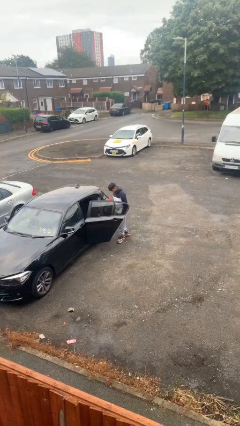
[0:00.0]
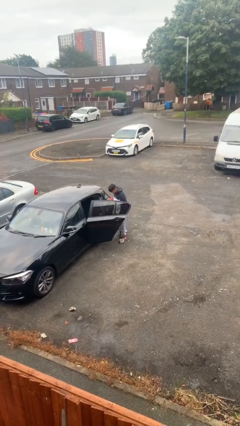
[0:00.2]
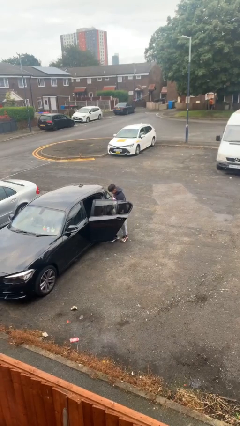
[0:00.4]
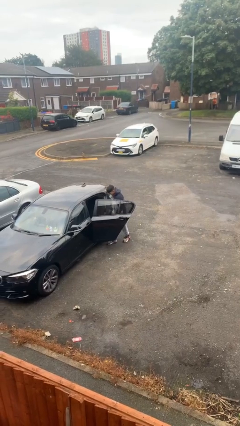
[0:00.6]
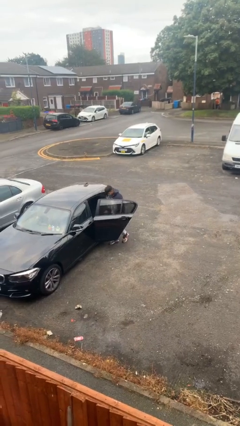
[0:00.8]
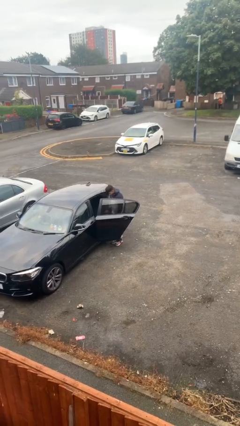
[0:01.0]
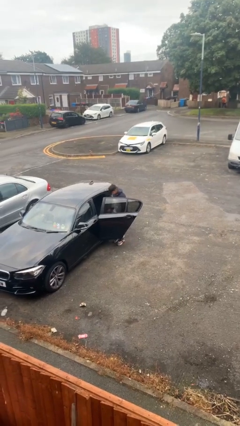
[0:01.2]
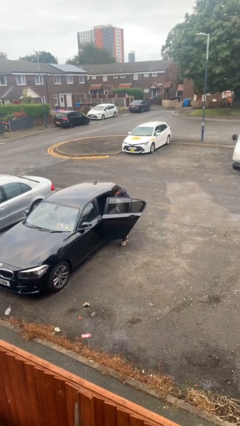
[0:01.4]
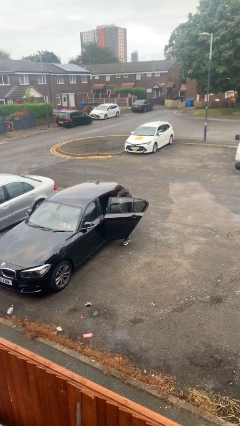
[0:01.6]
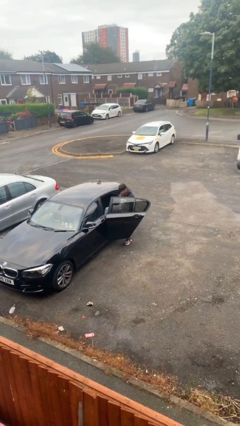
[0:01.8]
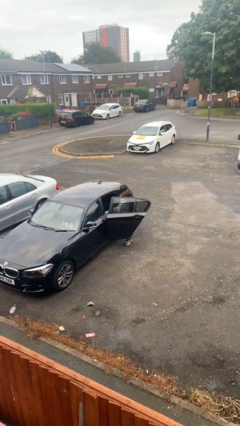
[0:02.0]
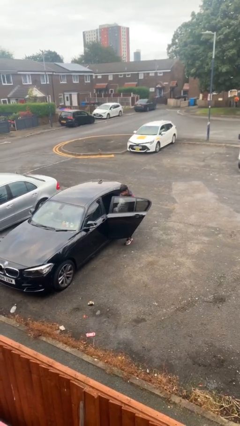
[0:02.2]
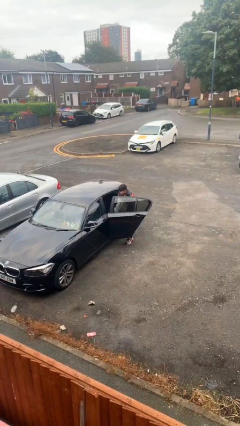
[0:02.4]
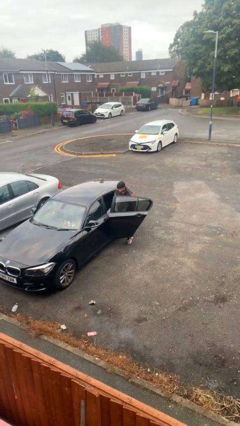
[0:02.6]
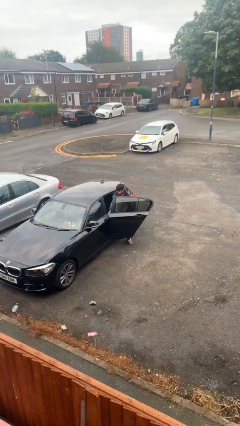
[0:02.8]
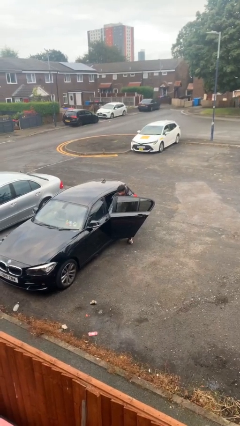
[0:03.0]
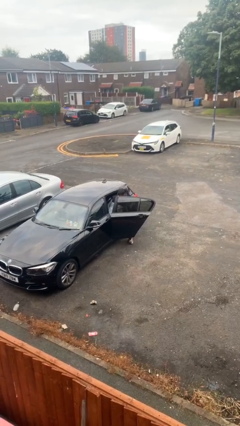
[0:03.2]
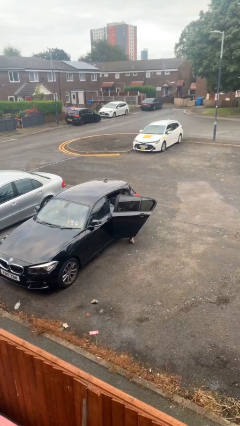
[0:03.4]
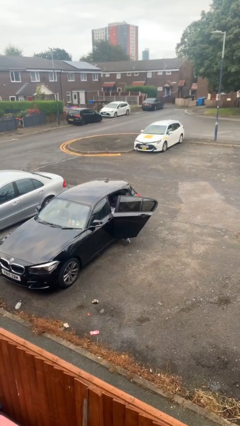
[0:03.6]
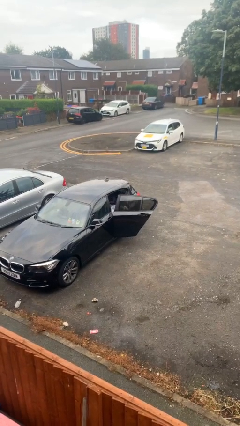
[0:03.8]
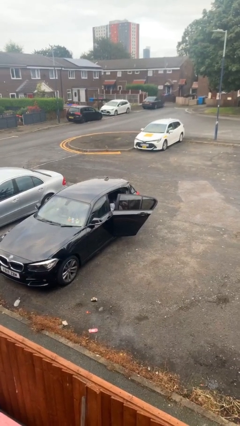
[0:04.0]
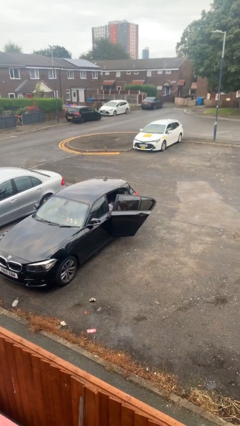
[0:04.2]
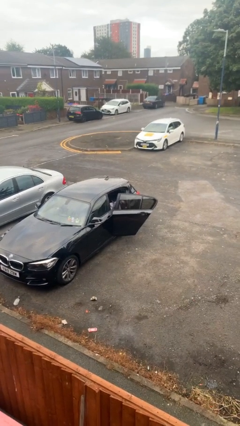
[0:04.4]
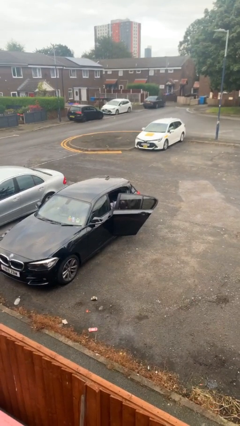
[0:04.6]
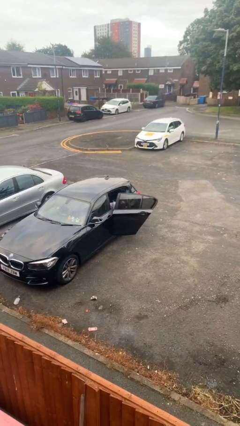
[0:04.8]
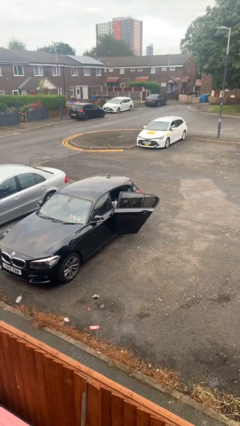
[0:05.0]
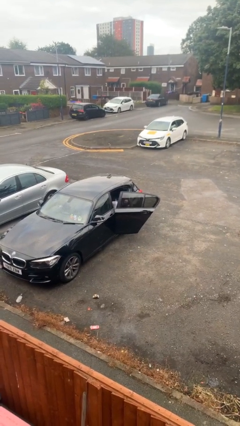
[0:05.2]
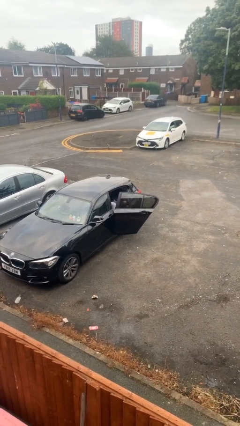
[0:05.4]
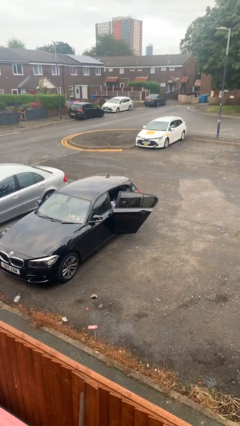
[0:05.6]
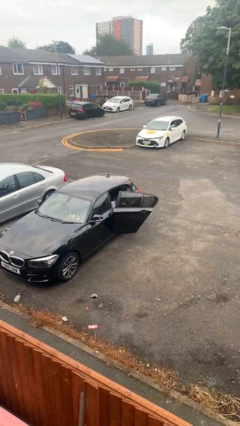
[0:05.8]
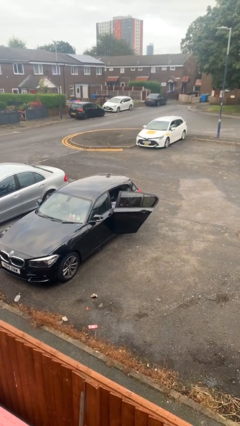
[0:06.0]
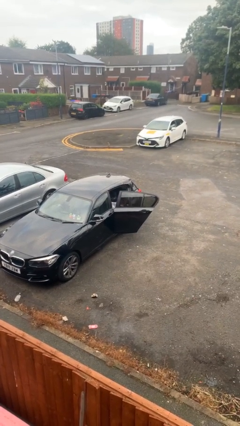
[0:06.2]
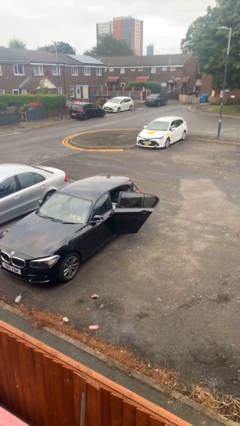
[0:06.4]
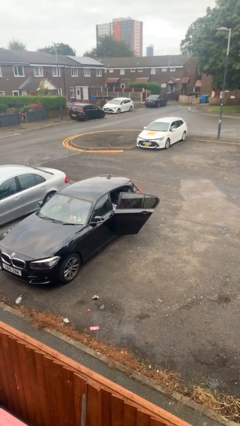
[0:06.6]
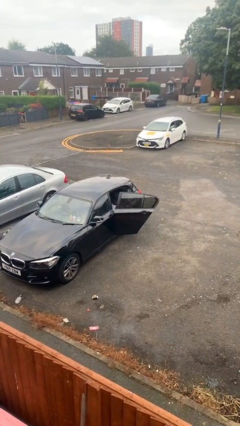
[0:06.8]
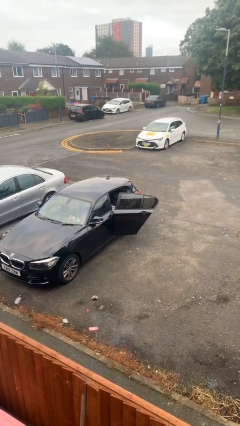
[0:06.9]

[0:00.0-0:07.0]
person enters car

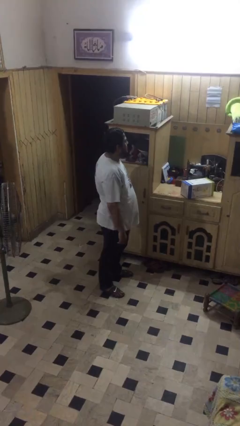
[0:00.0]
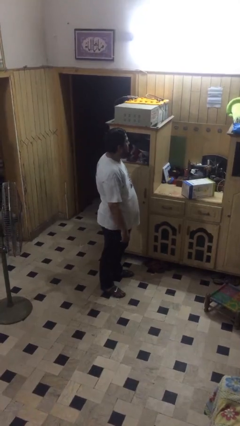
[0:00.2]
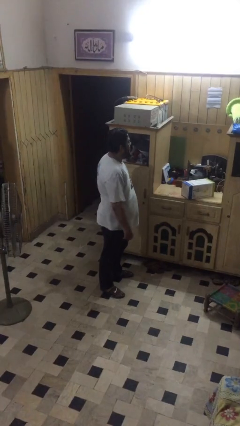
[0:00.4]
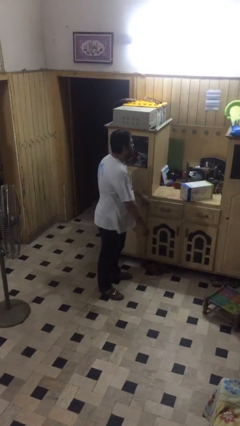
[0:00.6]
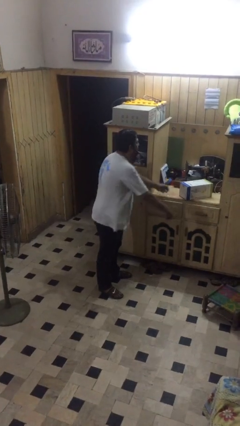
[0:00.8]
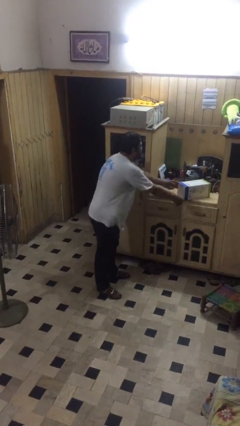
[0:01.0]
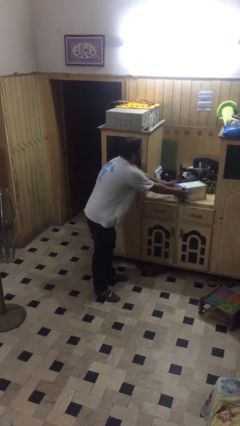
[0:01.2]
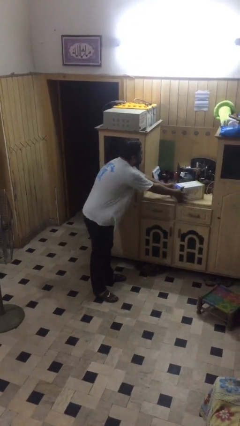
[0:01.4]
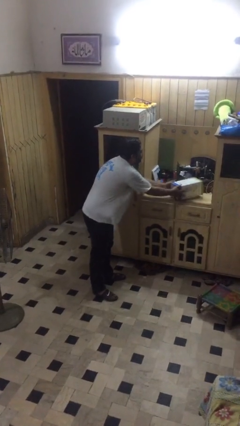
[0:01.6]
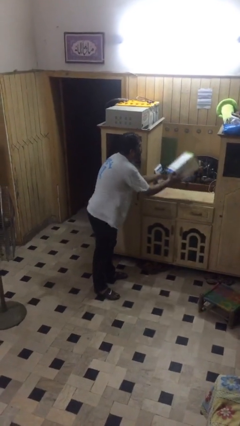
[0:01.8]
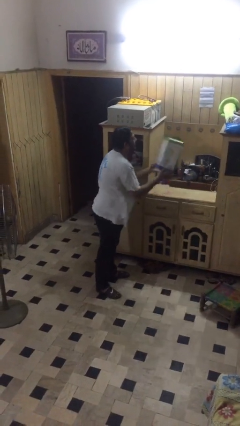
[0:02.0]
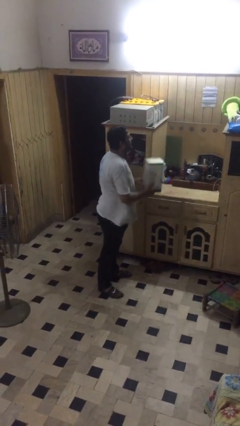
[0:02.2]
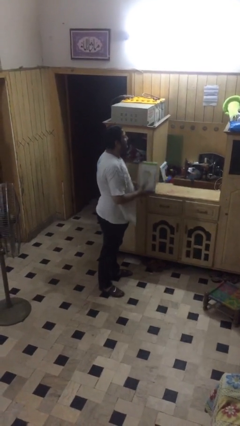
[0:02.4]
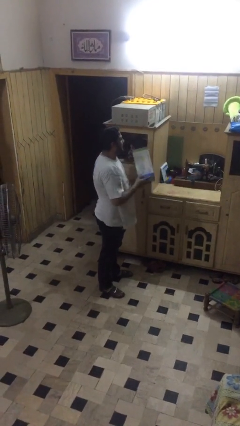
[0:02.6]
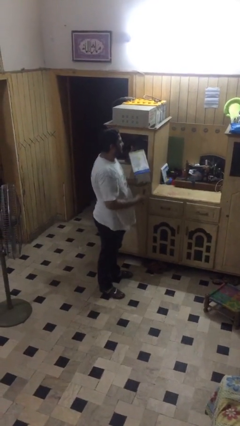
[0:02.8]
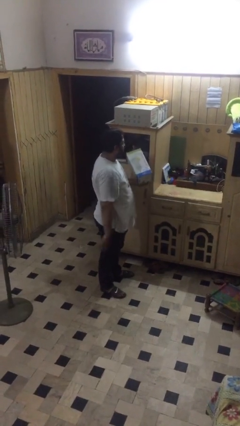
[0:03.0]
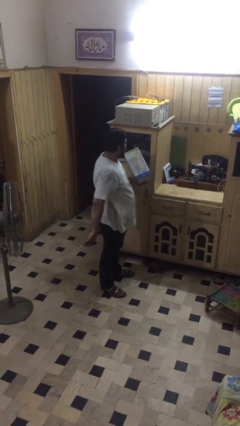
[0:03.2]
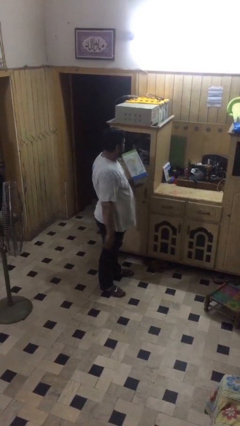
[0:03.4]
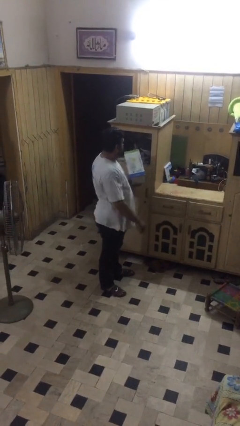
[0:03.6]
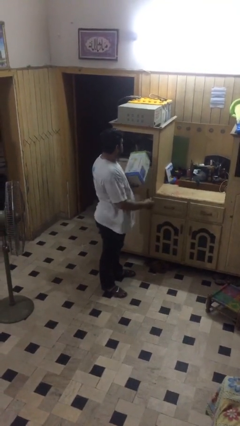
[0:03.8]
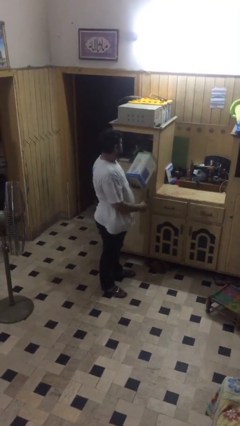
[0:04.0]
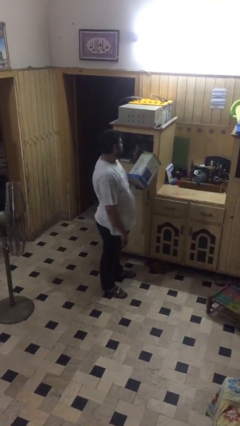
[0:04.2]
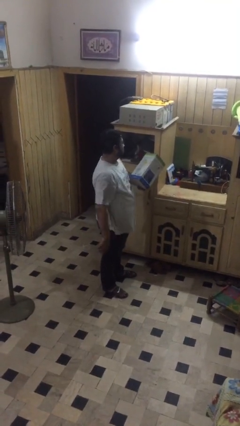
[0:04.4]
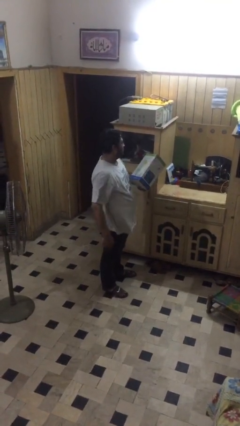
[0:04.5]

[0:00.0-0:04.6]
person picks up object from table

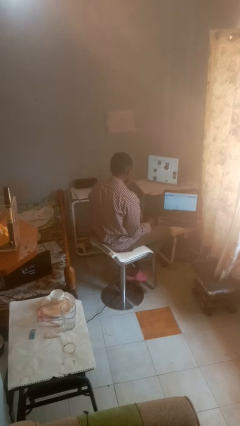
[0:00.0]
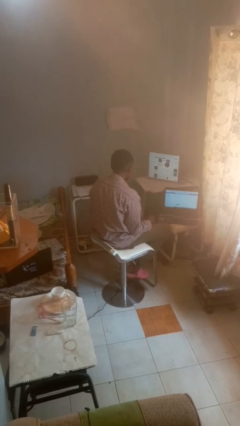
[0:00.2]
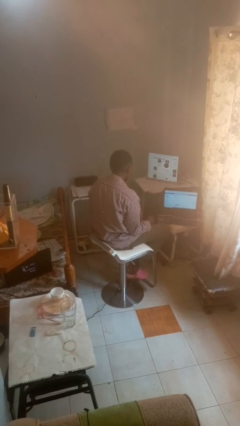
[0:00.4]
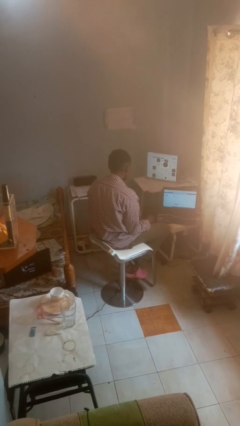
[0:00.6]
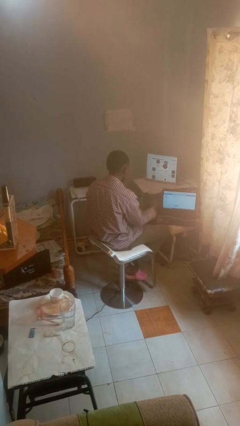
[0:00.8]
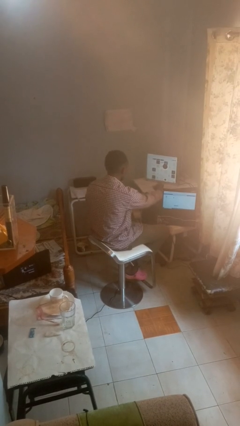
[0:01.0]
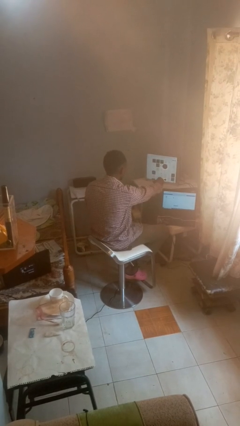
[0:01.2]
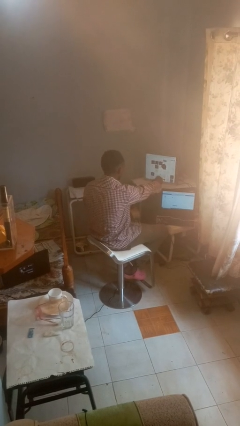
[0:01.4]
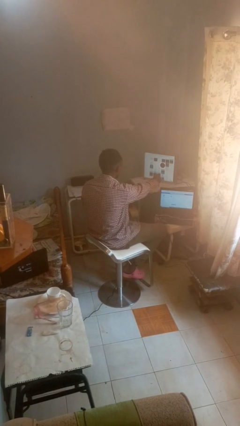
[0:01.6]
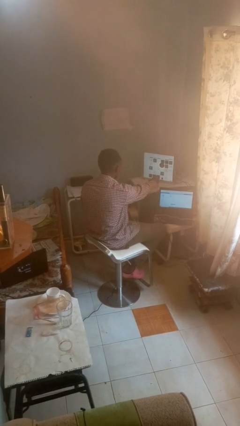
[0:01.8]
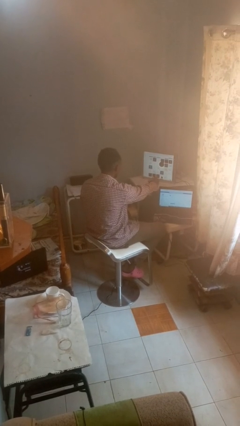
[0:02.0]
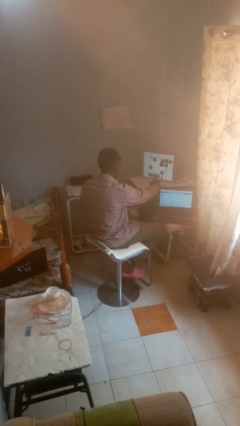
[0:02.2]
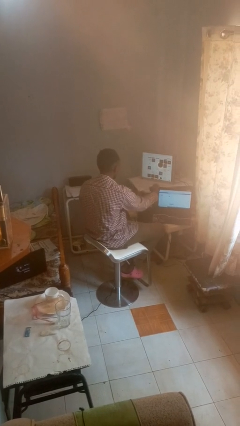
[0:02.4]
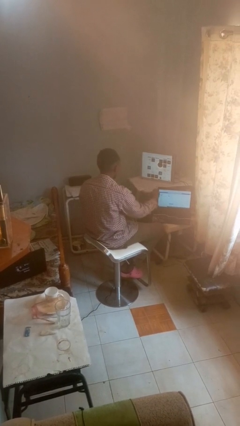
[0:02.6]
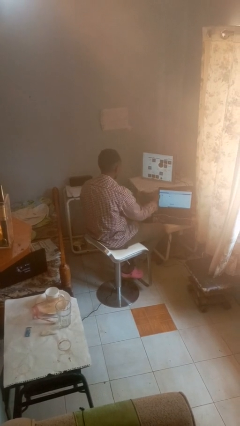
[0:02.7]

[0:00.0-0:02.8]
person uses television remote

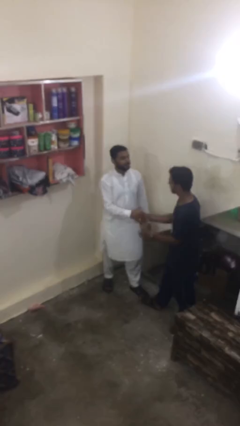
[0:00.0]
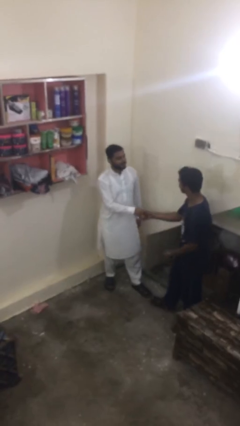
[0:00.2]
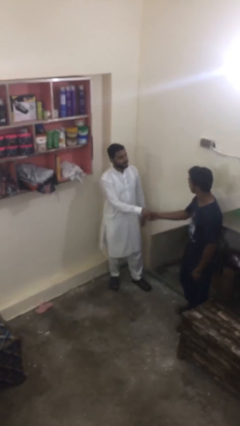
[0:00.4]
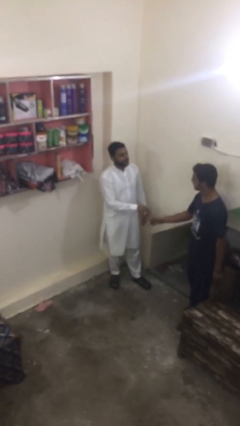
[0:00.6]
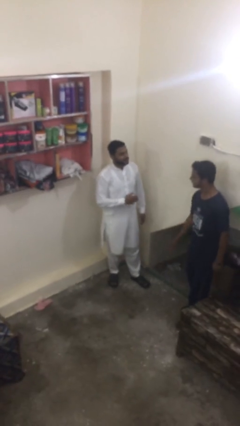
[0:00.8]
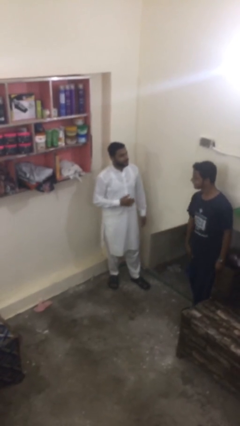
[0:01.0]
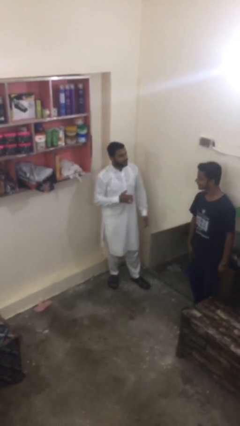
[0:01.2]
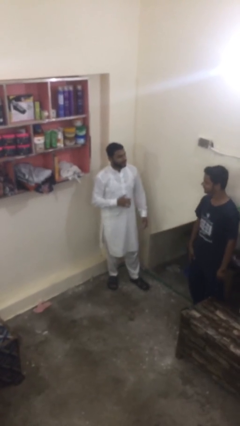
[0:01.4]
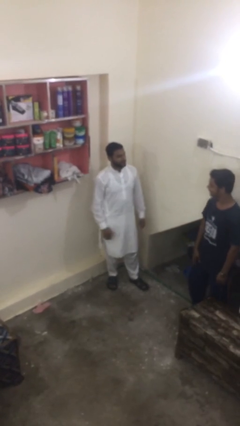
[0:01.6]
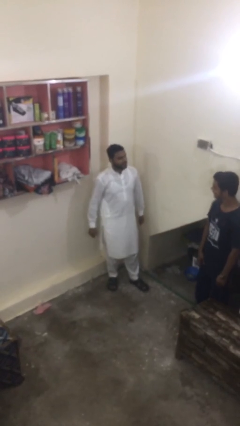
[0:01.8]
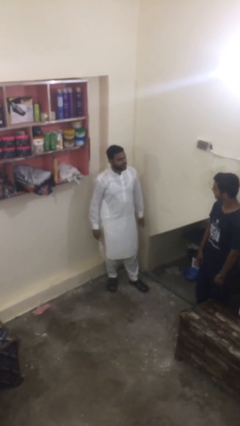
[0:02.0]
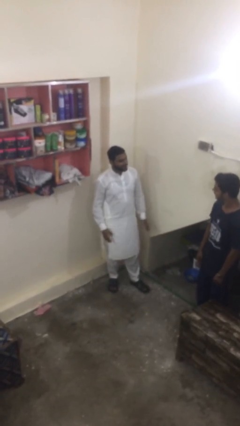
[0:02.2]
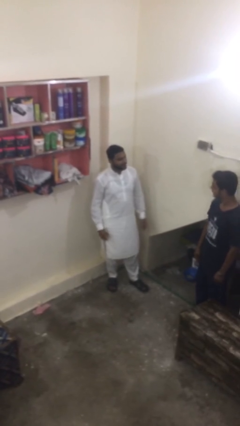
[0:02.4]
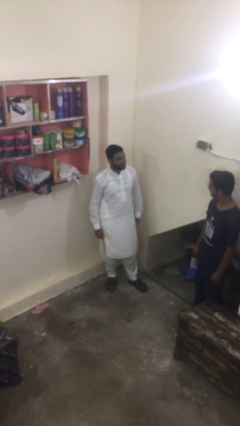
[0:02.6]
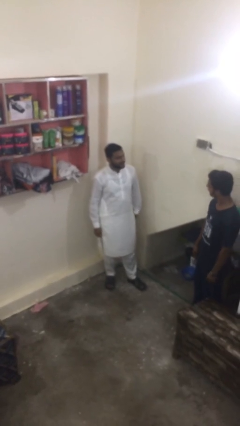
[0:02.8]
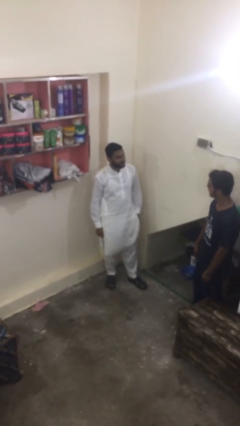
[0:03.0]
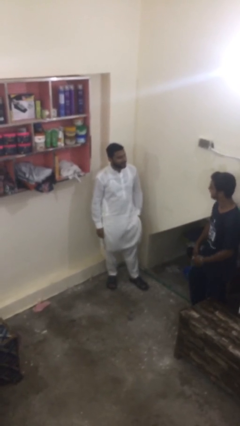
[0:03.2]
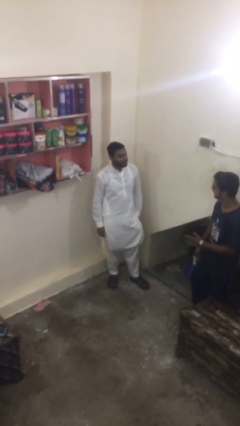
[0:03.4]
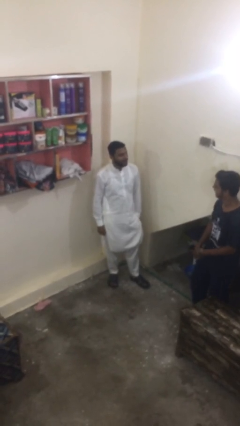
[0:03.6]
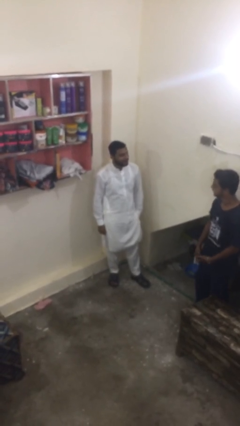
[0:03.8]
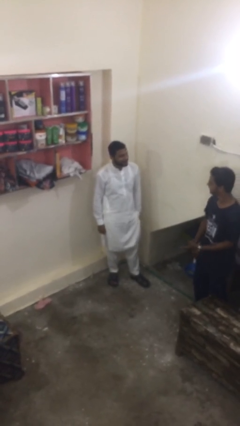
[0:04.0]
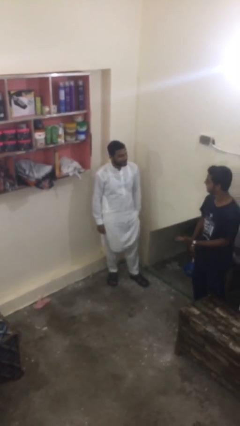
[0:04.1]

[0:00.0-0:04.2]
person talks to person
